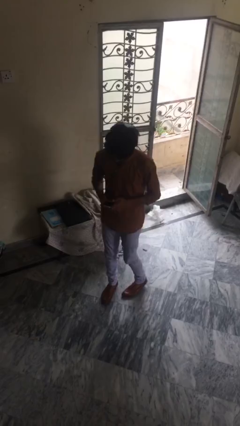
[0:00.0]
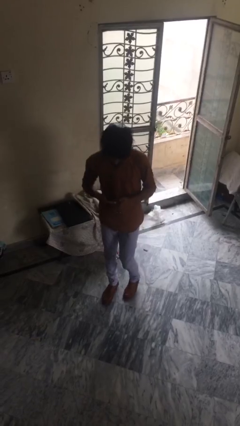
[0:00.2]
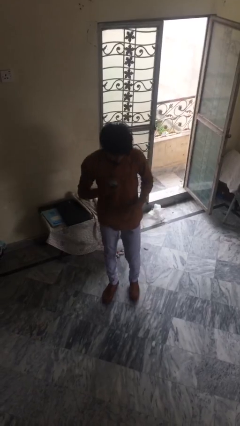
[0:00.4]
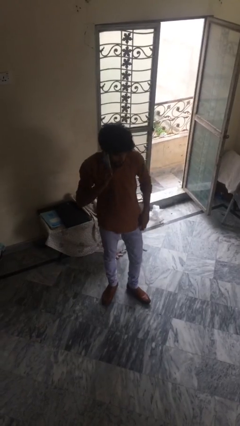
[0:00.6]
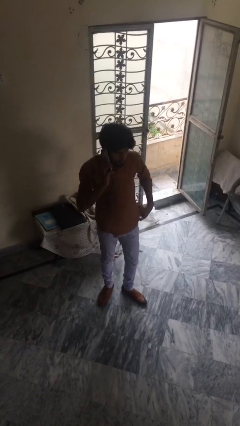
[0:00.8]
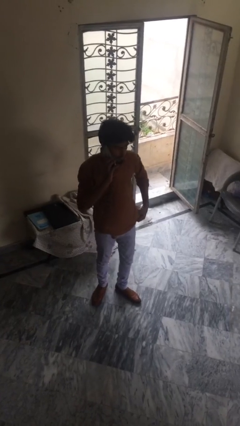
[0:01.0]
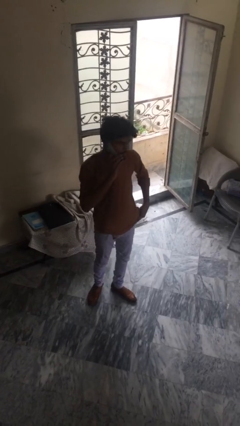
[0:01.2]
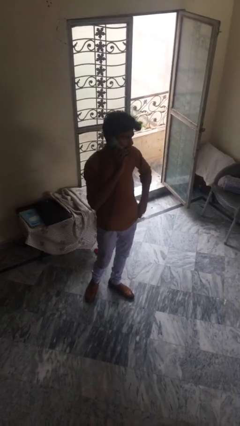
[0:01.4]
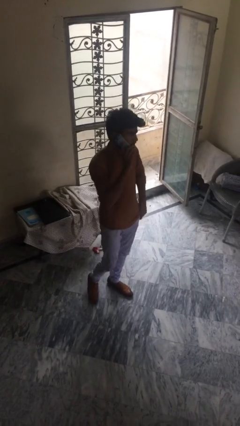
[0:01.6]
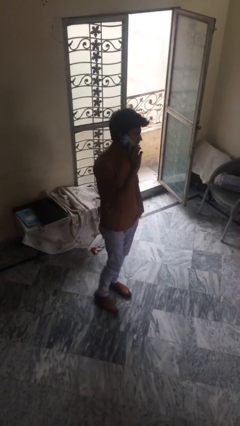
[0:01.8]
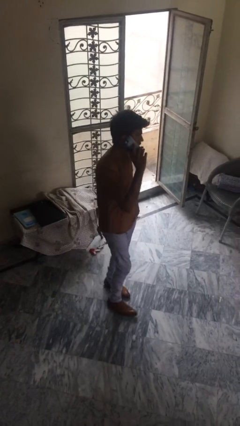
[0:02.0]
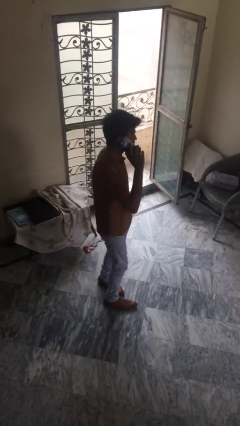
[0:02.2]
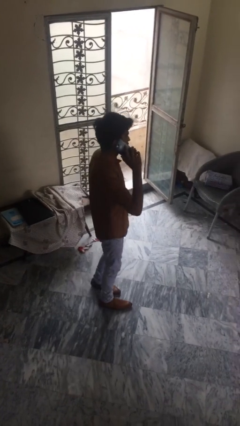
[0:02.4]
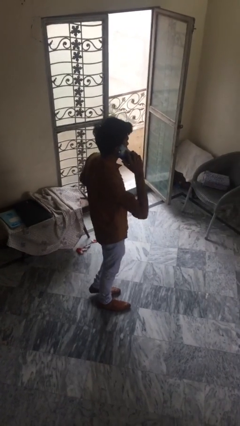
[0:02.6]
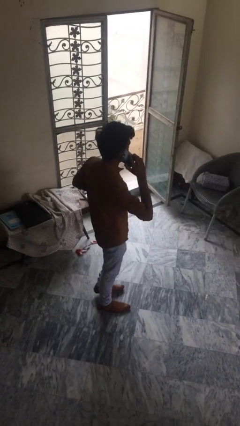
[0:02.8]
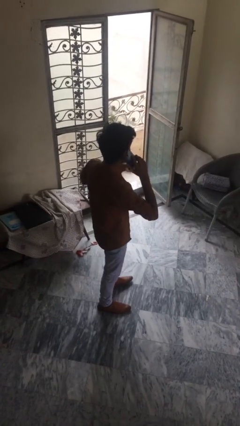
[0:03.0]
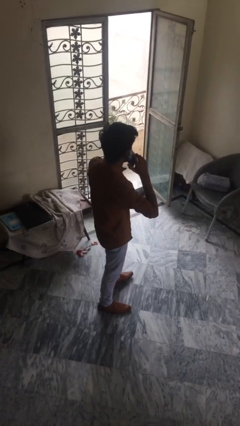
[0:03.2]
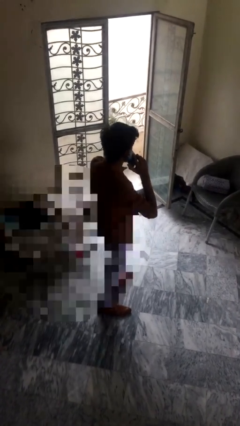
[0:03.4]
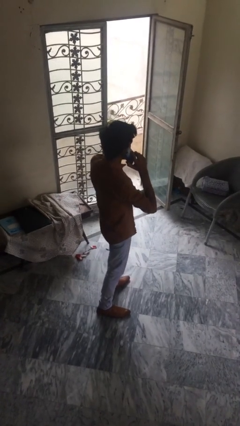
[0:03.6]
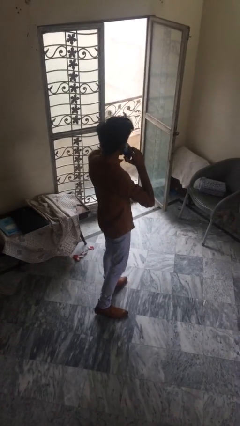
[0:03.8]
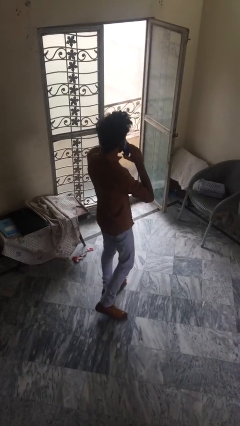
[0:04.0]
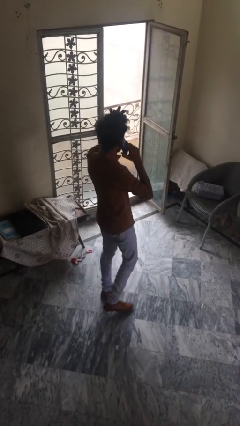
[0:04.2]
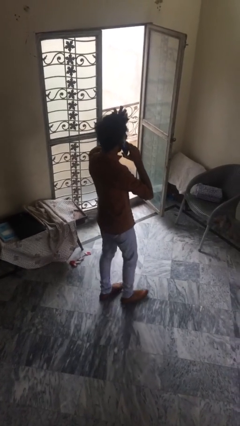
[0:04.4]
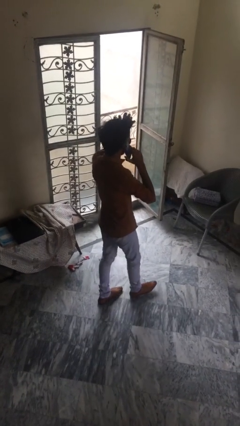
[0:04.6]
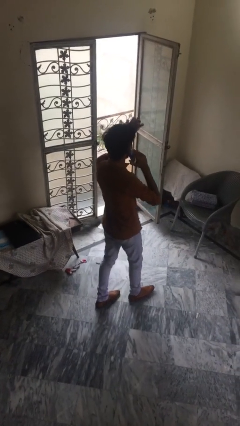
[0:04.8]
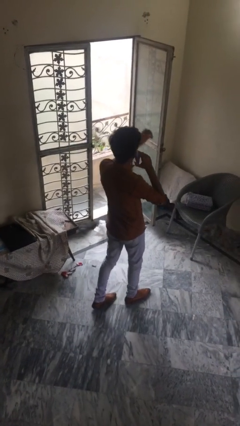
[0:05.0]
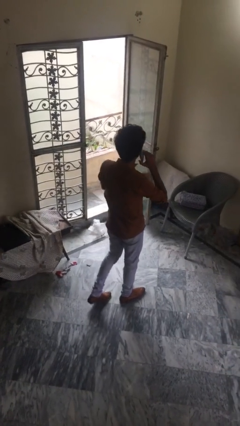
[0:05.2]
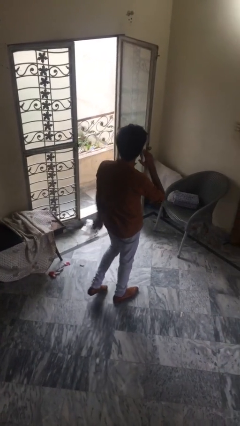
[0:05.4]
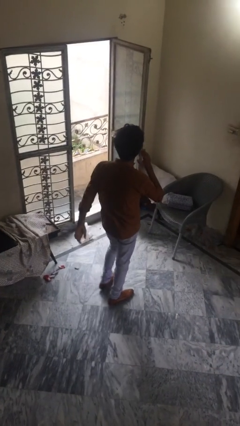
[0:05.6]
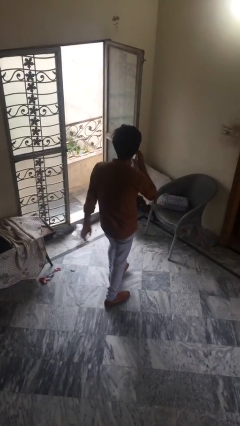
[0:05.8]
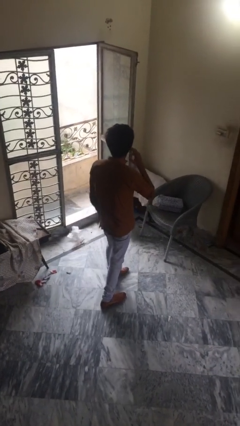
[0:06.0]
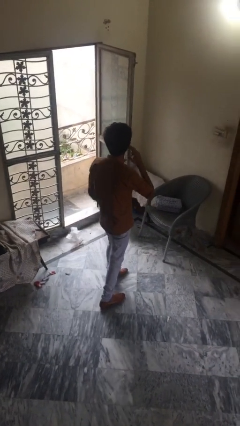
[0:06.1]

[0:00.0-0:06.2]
person talks on phone

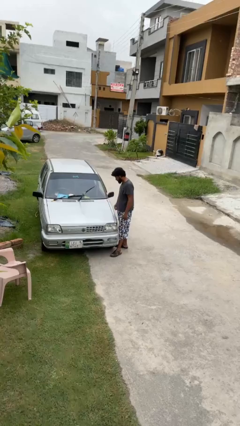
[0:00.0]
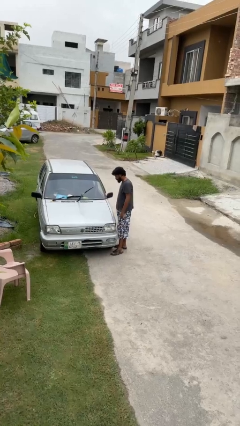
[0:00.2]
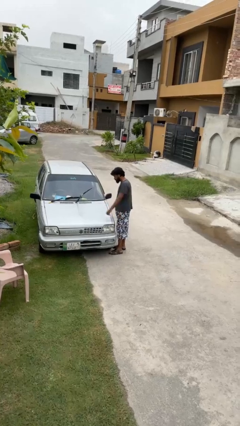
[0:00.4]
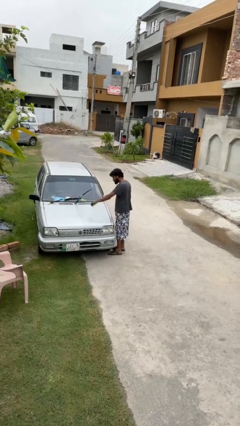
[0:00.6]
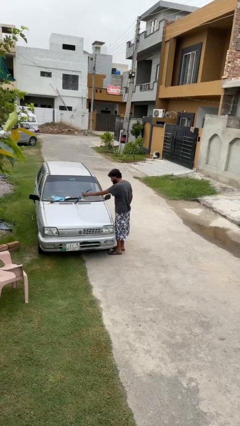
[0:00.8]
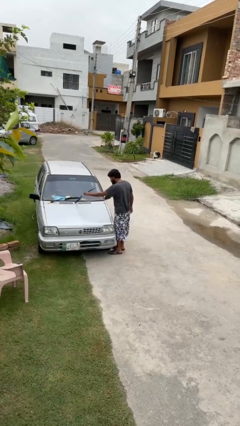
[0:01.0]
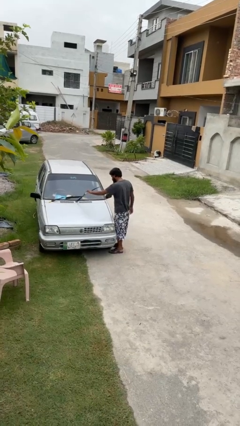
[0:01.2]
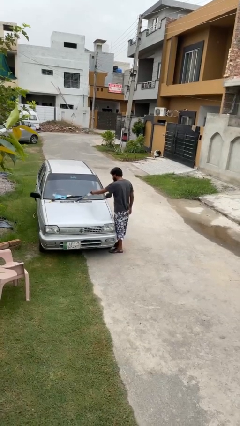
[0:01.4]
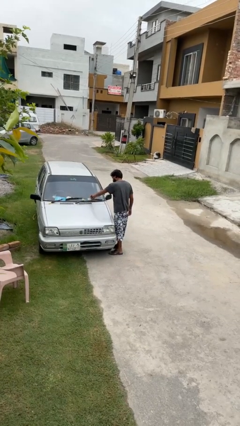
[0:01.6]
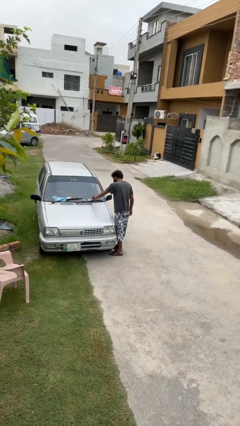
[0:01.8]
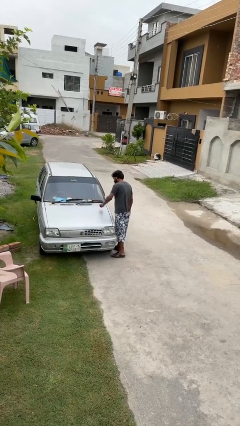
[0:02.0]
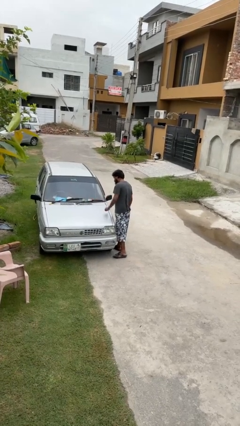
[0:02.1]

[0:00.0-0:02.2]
person flips down car wipers

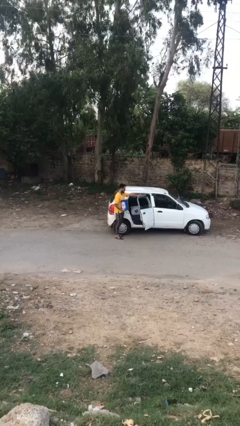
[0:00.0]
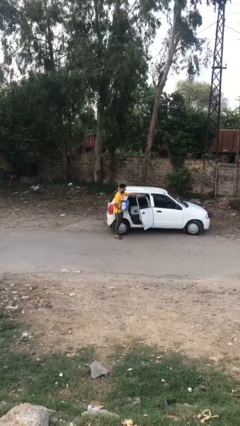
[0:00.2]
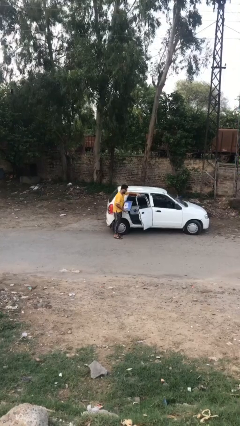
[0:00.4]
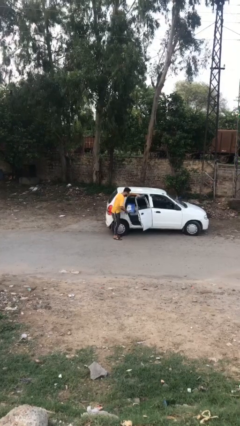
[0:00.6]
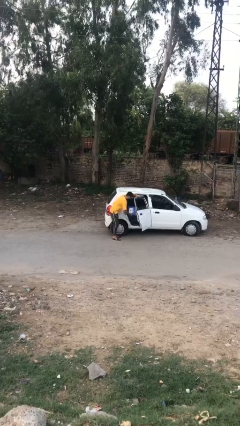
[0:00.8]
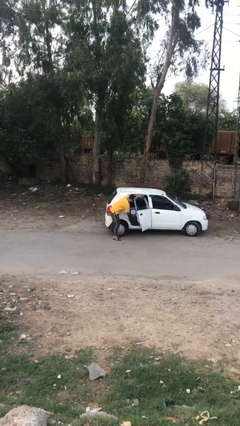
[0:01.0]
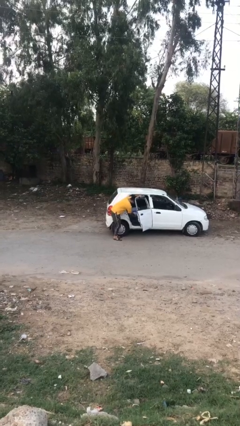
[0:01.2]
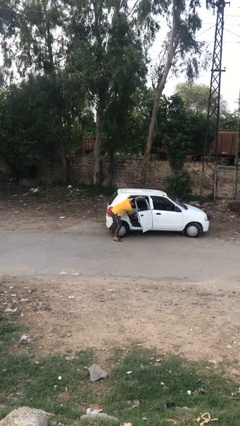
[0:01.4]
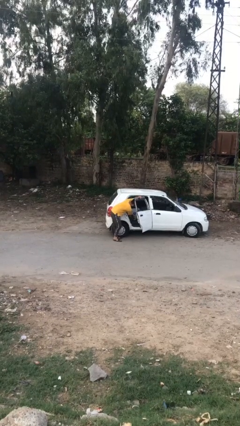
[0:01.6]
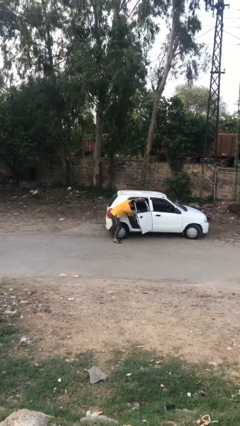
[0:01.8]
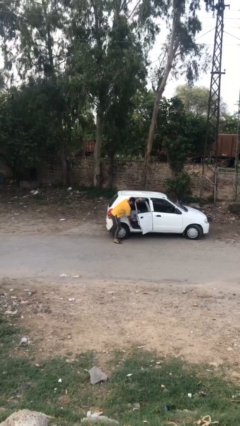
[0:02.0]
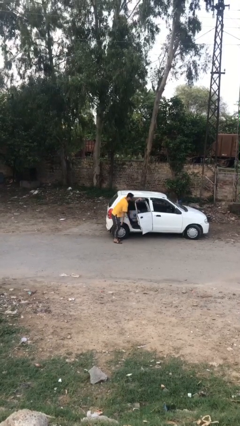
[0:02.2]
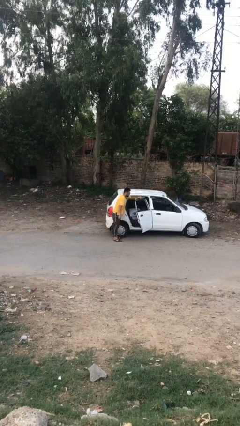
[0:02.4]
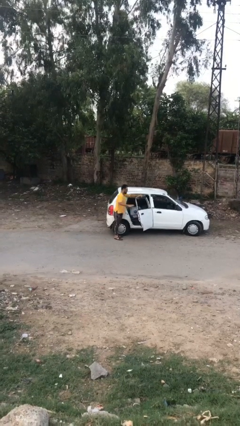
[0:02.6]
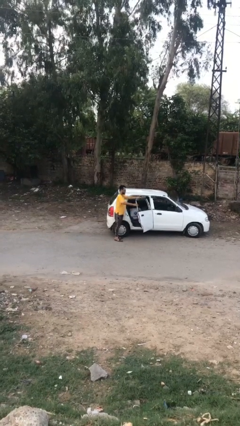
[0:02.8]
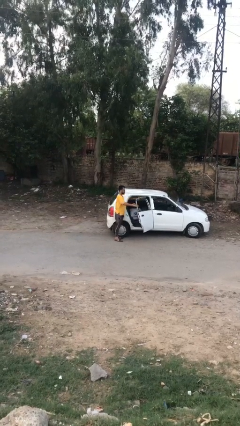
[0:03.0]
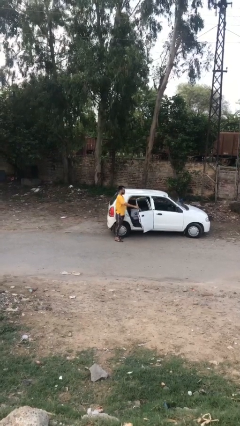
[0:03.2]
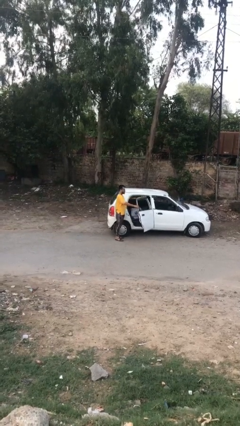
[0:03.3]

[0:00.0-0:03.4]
person loads car

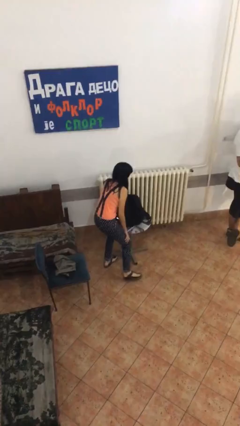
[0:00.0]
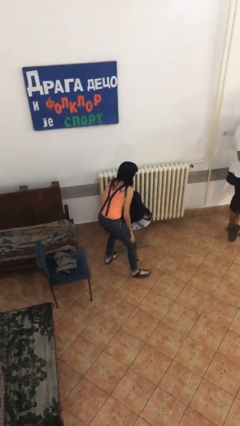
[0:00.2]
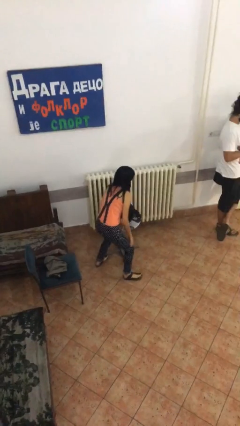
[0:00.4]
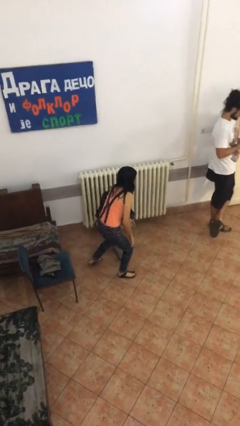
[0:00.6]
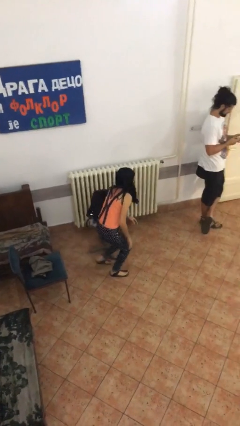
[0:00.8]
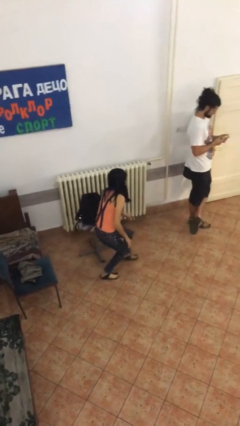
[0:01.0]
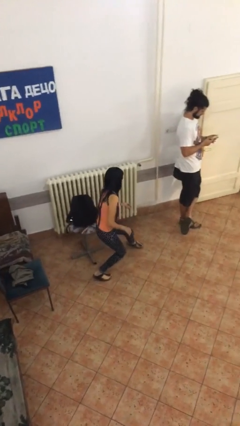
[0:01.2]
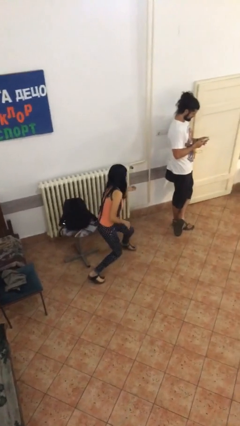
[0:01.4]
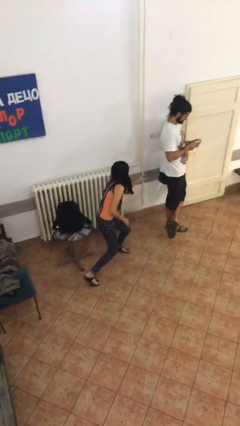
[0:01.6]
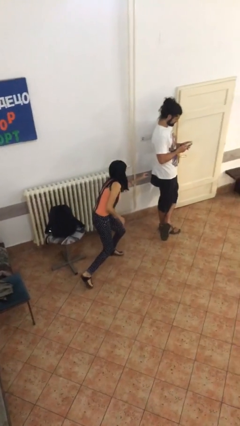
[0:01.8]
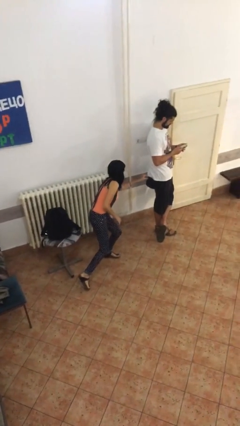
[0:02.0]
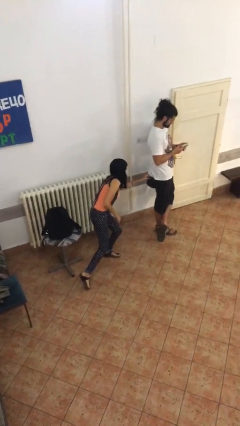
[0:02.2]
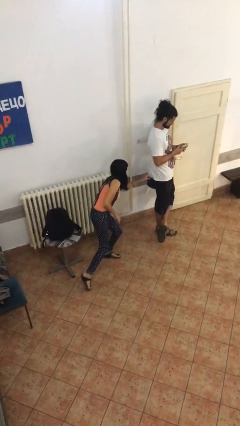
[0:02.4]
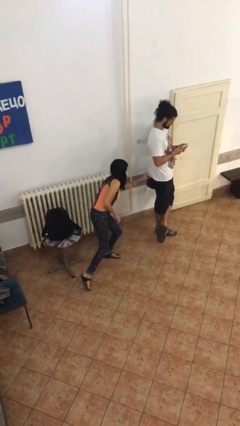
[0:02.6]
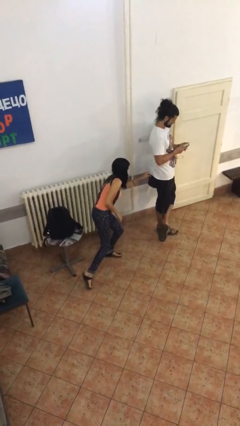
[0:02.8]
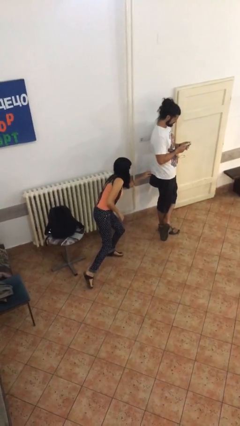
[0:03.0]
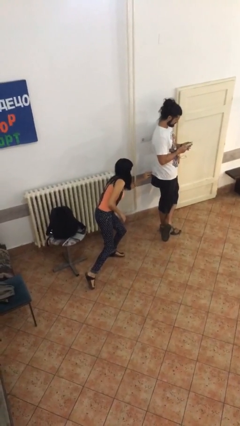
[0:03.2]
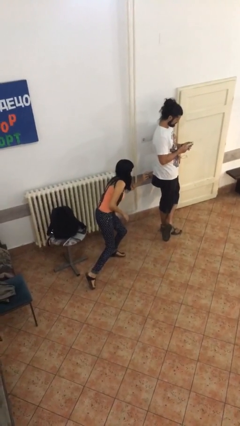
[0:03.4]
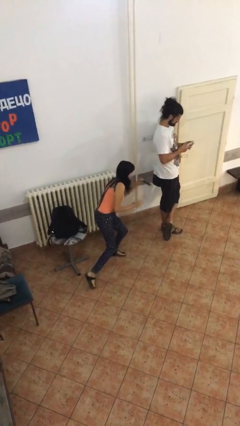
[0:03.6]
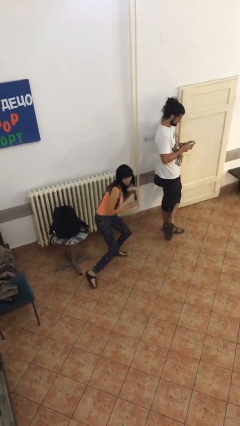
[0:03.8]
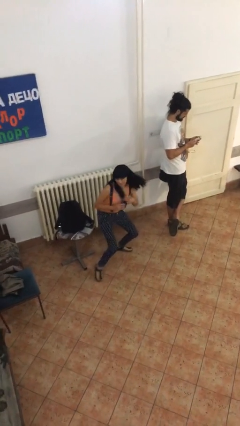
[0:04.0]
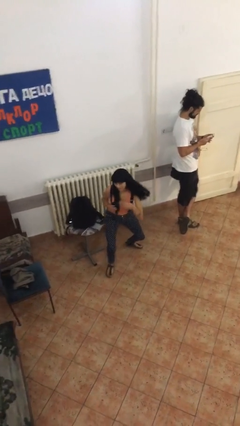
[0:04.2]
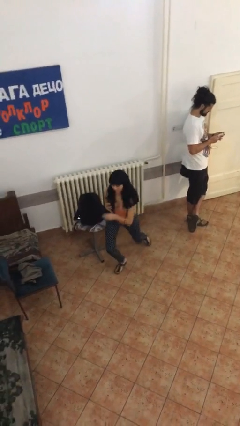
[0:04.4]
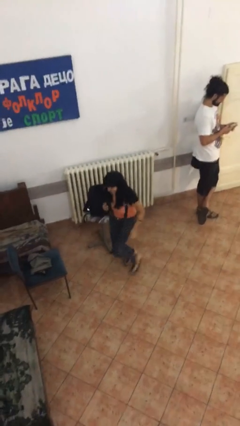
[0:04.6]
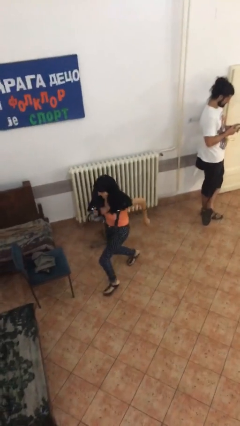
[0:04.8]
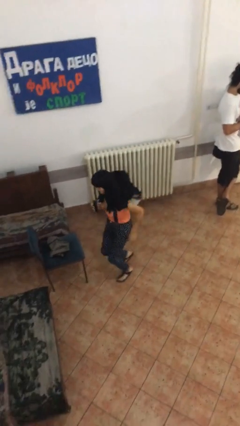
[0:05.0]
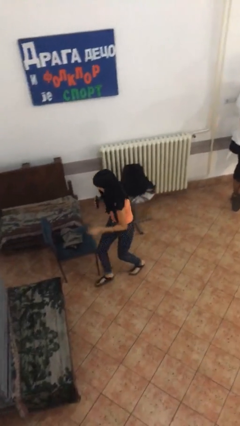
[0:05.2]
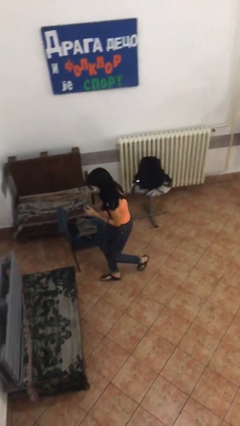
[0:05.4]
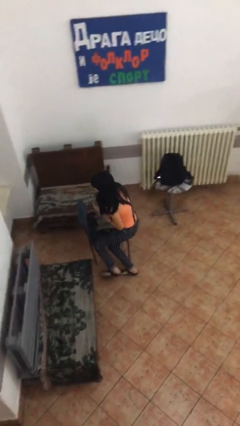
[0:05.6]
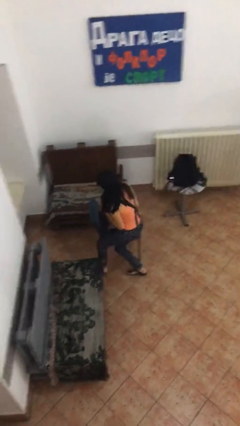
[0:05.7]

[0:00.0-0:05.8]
person steals object from person
